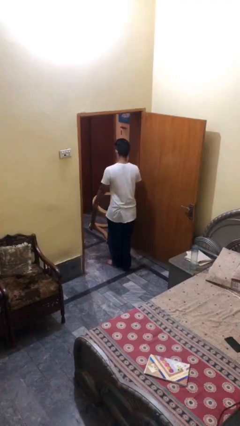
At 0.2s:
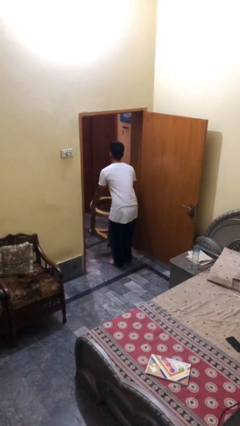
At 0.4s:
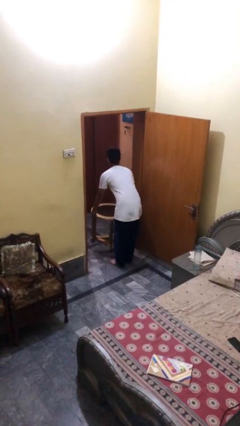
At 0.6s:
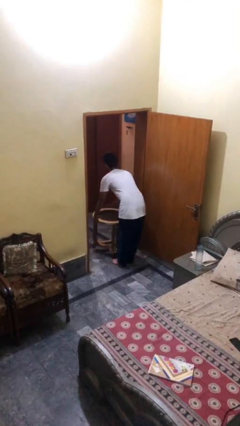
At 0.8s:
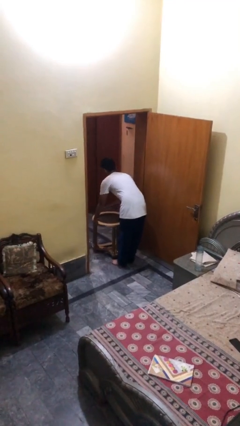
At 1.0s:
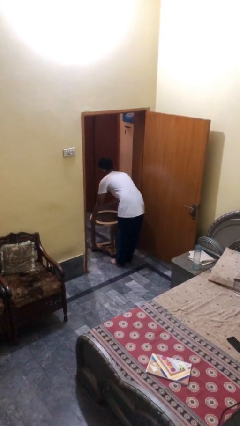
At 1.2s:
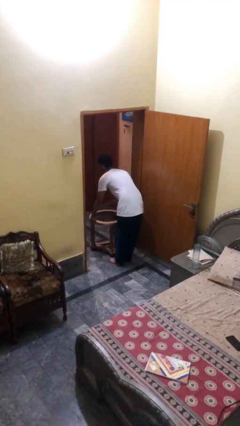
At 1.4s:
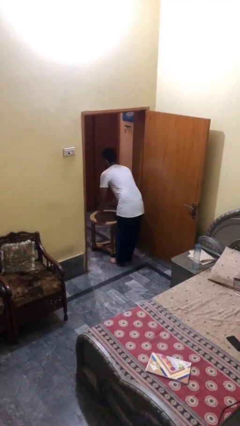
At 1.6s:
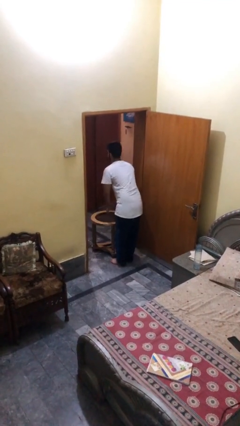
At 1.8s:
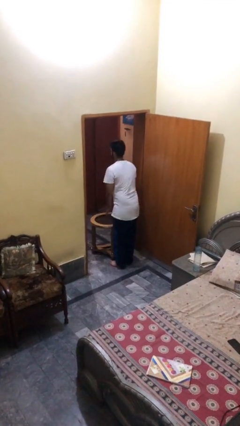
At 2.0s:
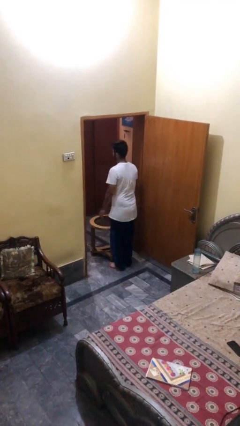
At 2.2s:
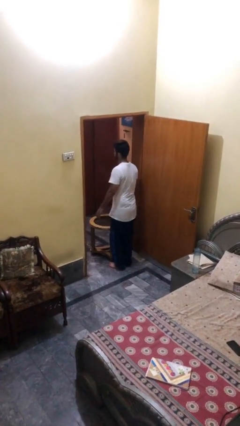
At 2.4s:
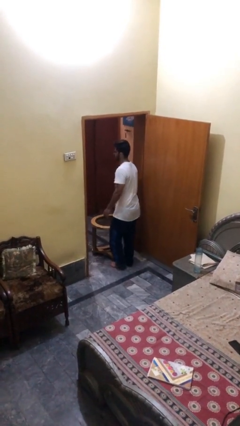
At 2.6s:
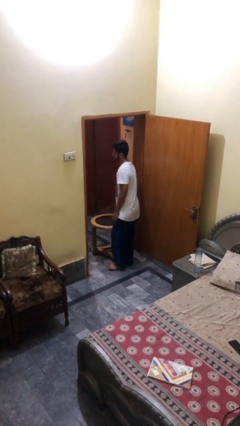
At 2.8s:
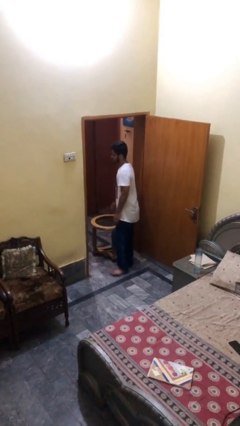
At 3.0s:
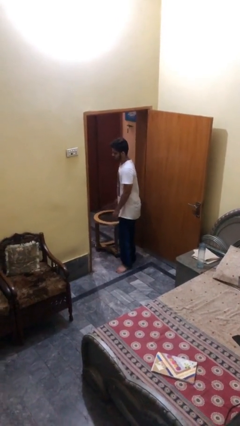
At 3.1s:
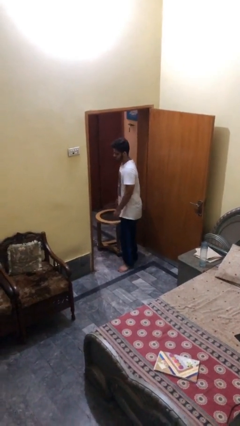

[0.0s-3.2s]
person puts down object on floor

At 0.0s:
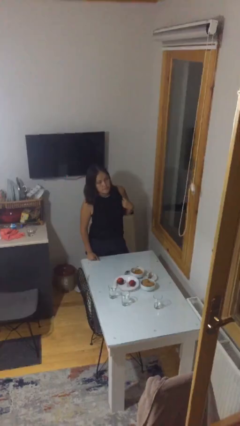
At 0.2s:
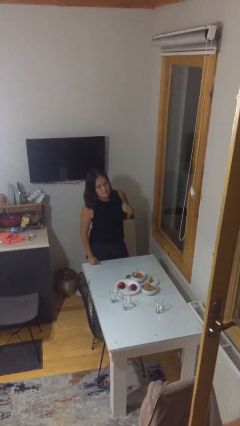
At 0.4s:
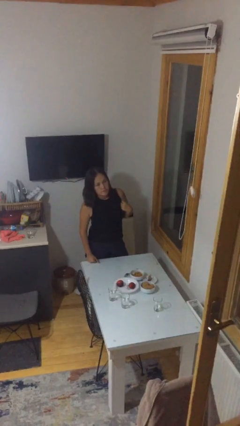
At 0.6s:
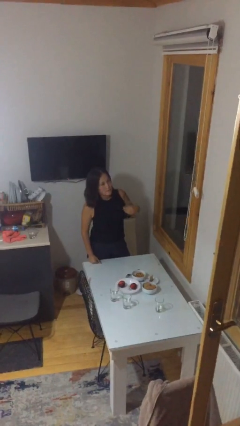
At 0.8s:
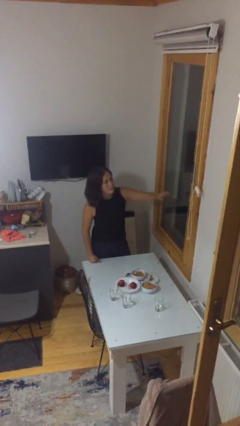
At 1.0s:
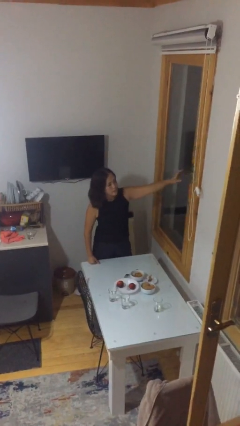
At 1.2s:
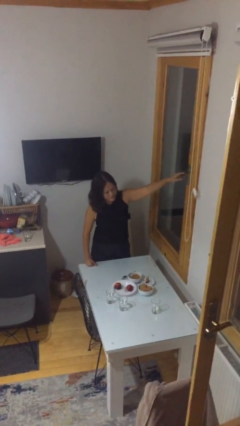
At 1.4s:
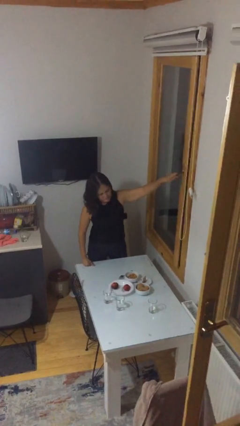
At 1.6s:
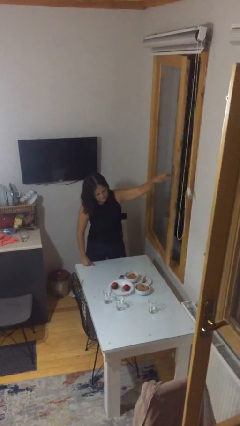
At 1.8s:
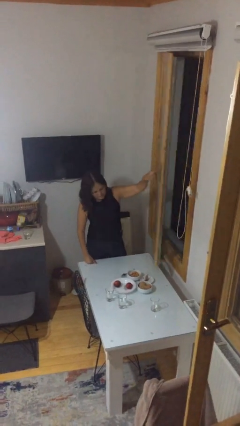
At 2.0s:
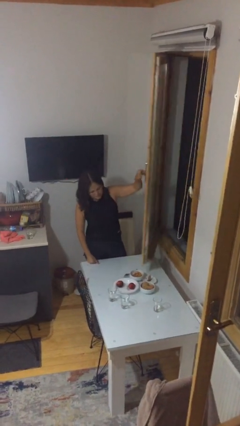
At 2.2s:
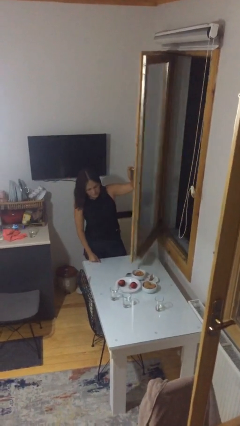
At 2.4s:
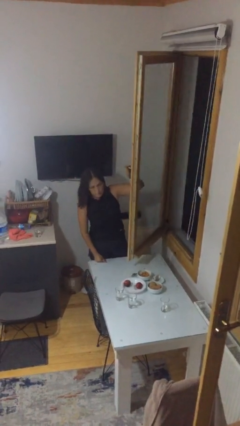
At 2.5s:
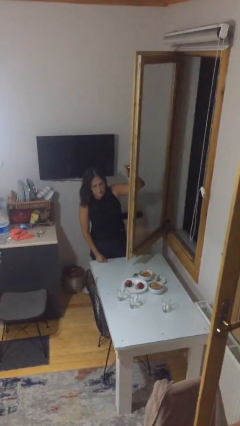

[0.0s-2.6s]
person opens home window

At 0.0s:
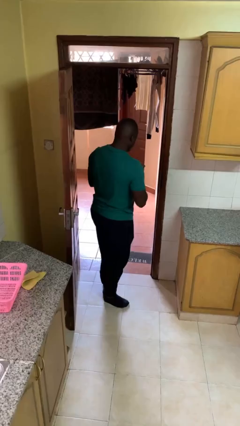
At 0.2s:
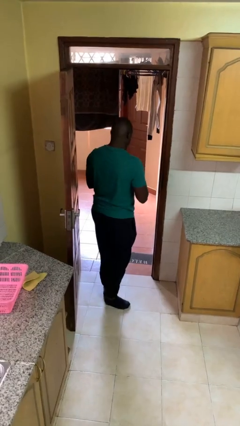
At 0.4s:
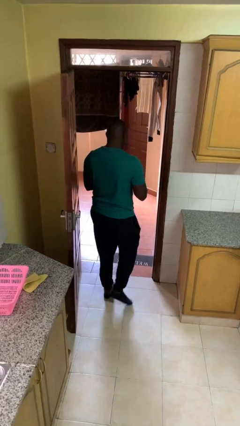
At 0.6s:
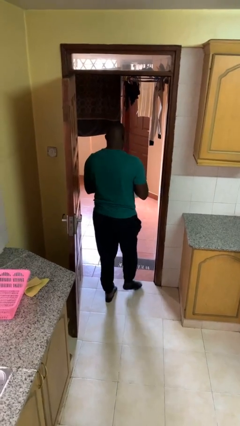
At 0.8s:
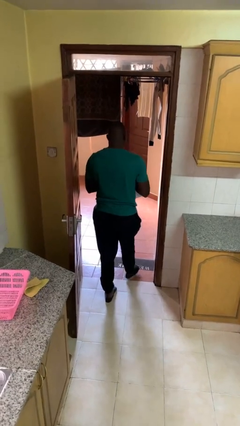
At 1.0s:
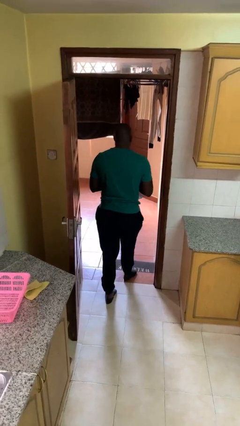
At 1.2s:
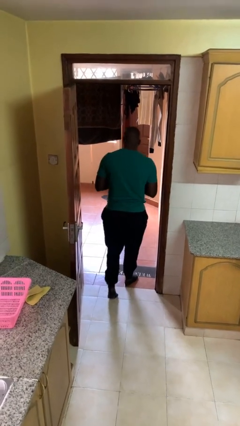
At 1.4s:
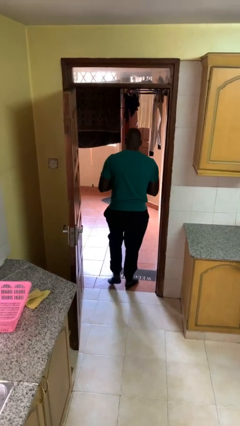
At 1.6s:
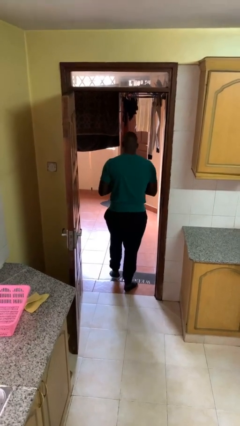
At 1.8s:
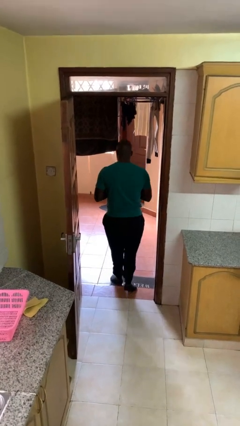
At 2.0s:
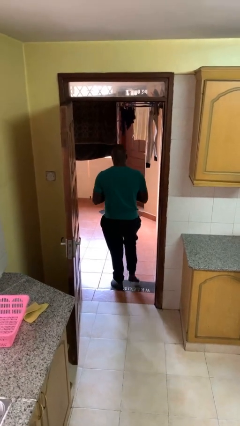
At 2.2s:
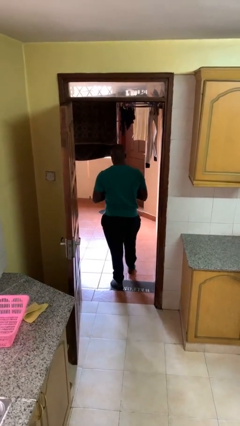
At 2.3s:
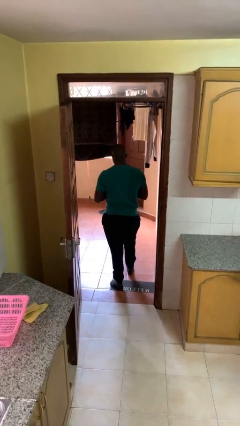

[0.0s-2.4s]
person exits scene through structure

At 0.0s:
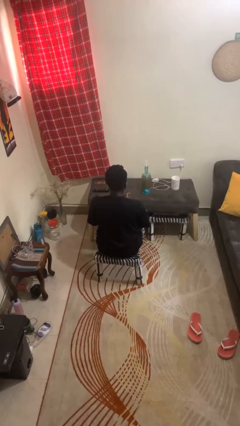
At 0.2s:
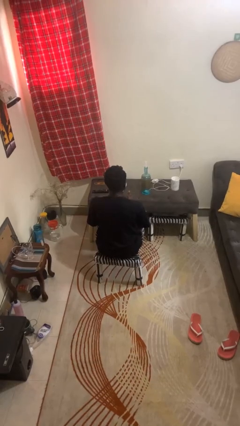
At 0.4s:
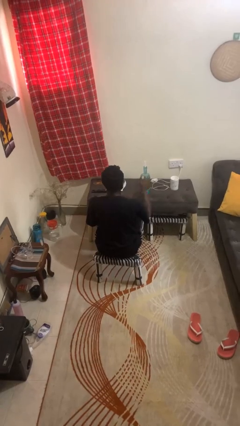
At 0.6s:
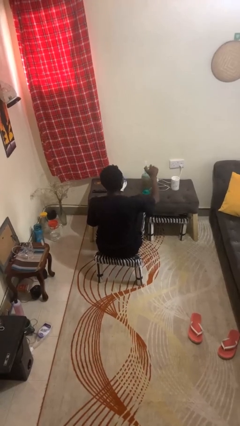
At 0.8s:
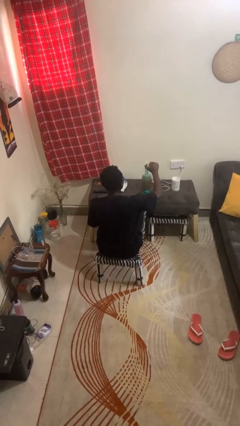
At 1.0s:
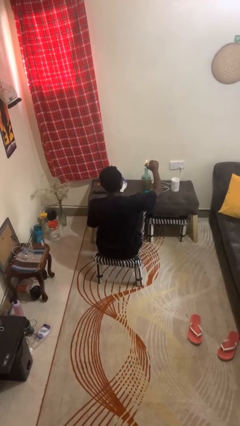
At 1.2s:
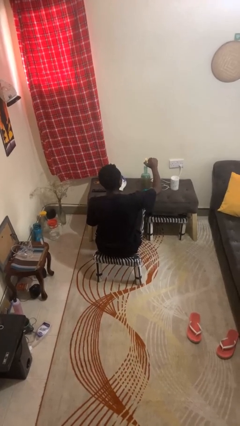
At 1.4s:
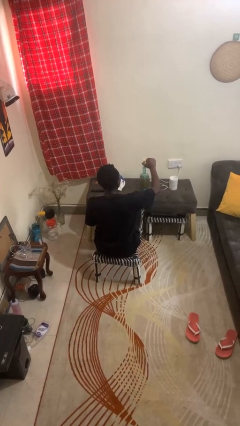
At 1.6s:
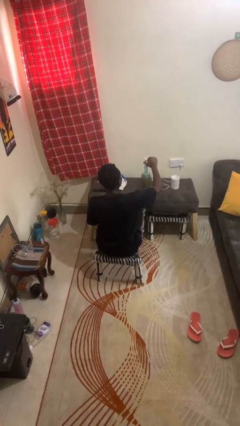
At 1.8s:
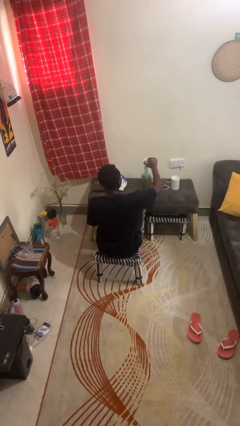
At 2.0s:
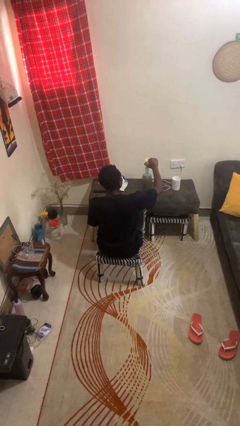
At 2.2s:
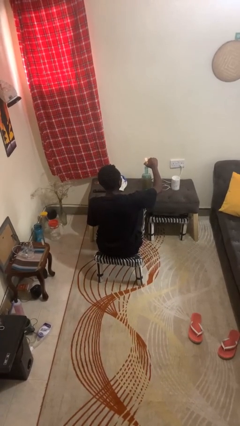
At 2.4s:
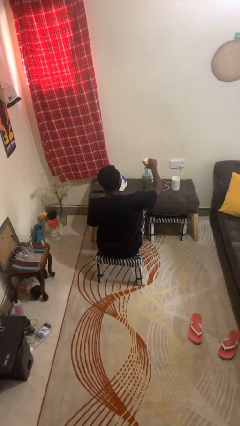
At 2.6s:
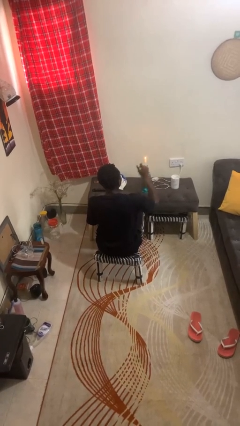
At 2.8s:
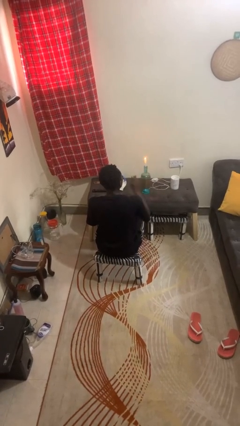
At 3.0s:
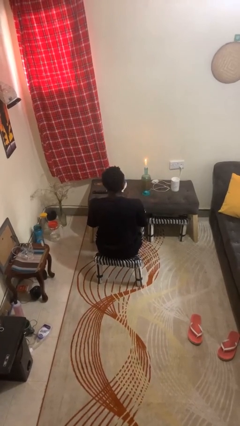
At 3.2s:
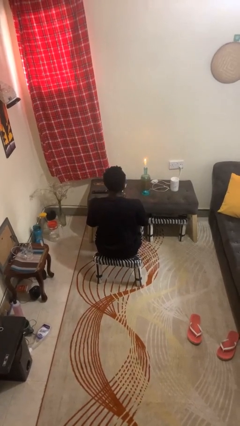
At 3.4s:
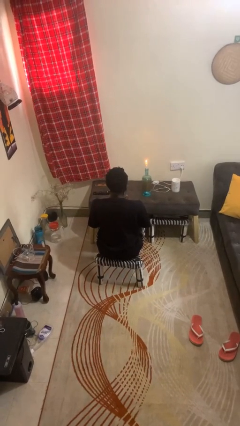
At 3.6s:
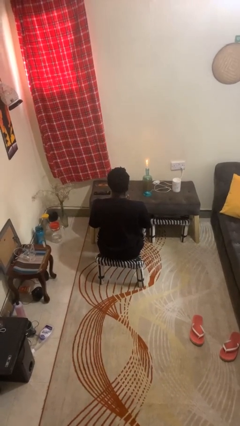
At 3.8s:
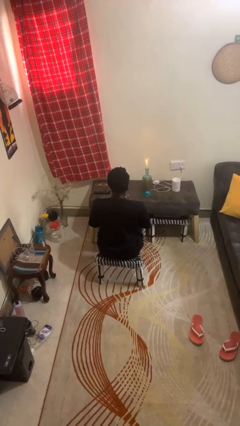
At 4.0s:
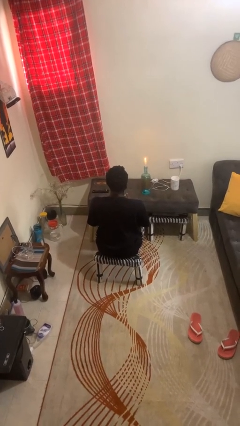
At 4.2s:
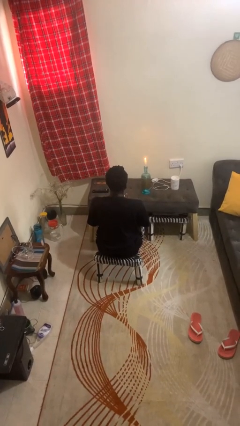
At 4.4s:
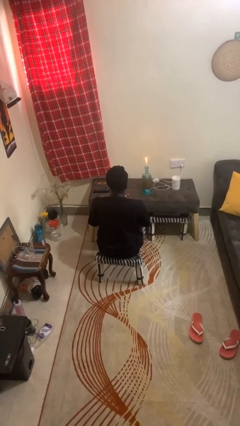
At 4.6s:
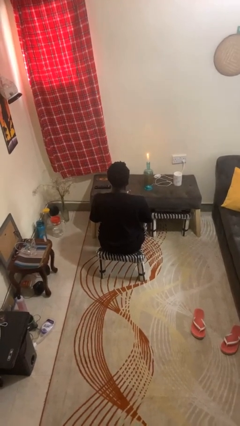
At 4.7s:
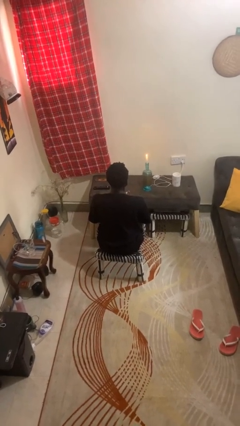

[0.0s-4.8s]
person lights candle

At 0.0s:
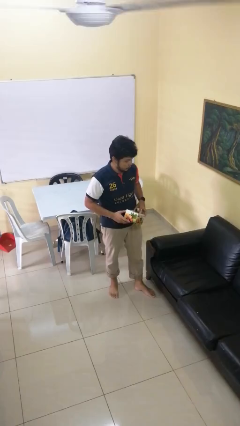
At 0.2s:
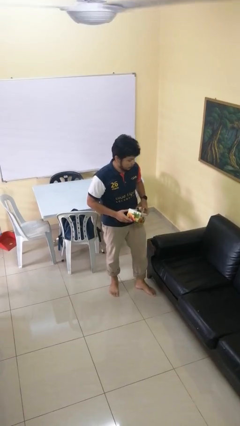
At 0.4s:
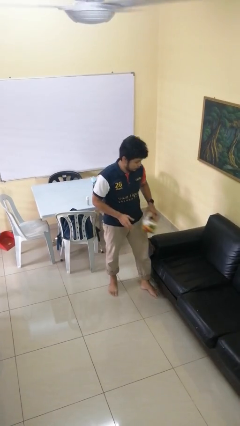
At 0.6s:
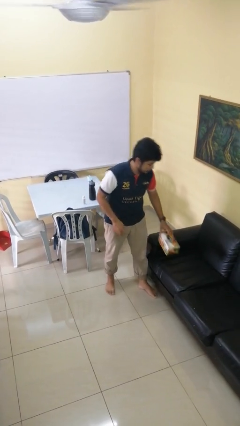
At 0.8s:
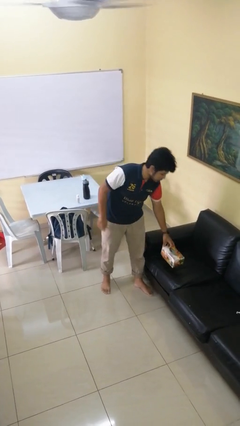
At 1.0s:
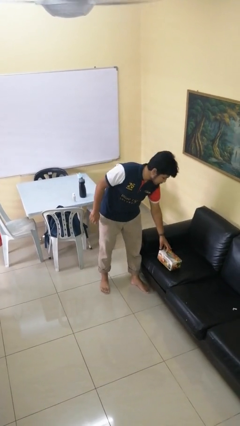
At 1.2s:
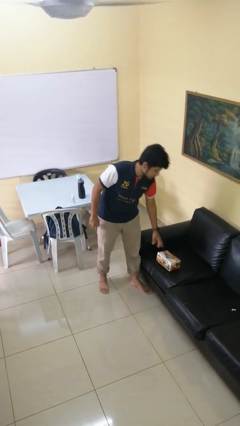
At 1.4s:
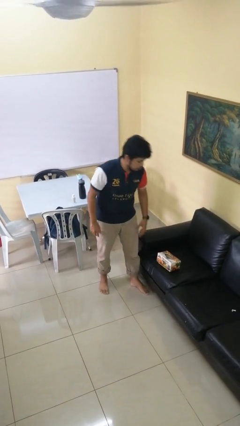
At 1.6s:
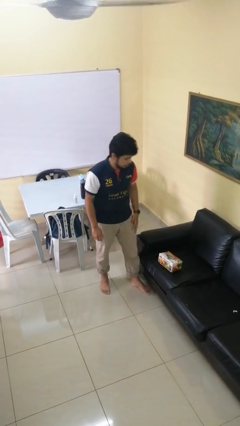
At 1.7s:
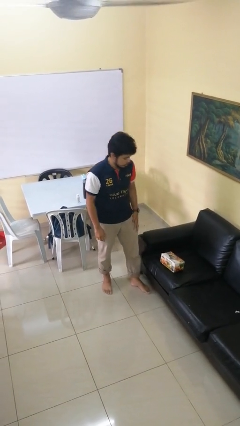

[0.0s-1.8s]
person puts down object on couch

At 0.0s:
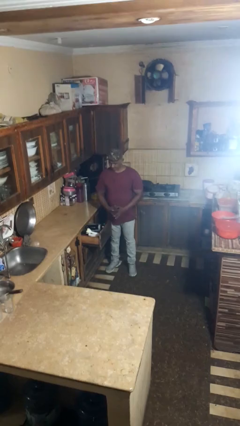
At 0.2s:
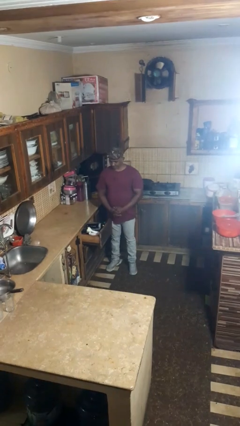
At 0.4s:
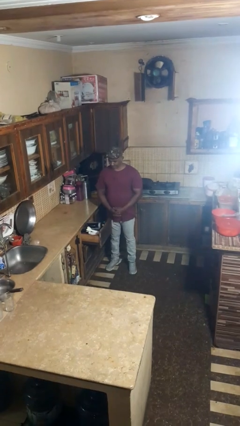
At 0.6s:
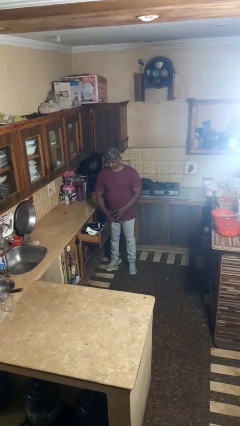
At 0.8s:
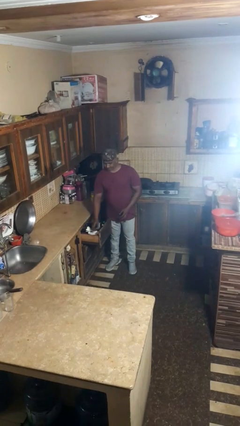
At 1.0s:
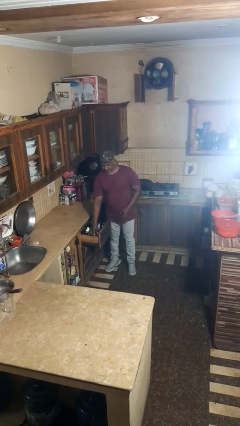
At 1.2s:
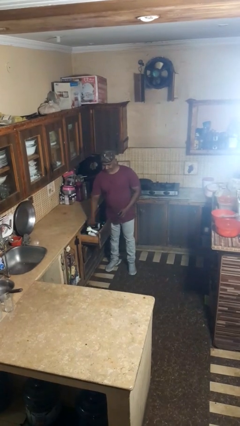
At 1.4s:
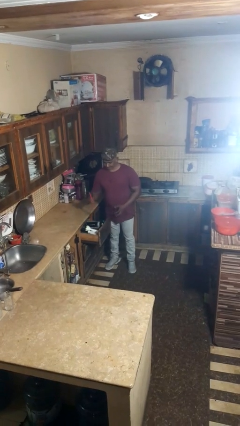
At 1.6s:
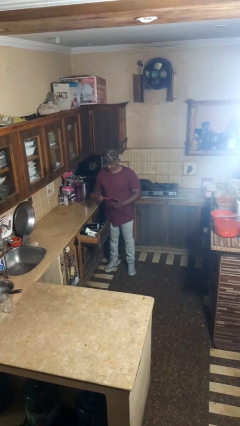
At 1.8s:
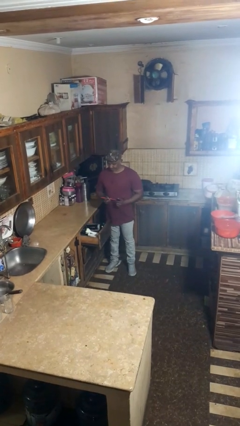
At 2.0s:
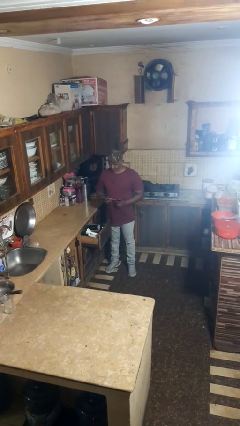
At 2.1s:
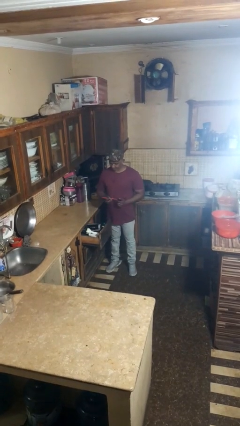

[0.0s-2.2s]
person takes object from kitchen drawer

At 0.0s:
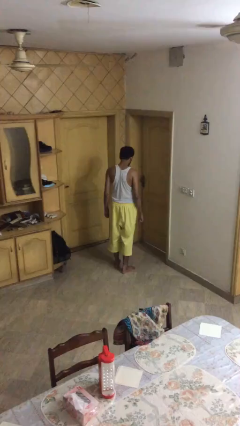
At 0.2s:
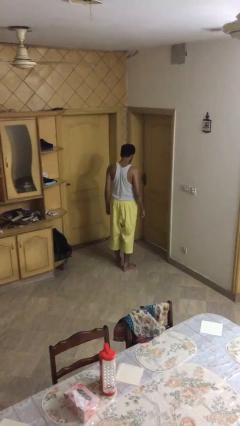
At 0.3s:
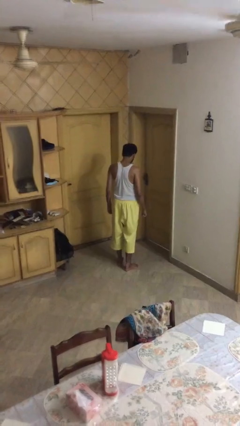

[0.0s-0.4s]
person opens facility door
